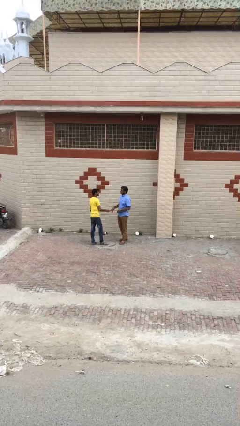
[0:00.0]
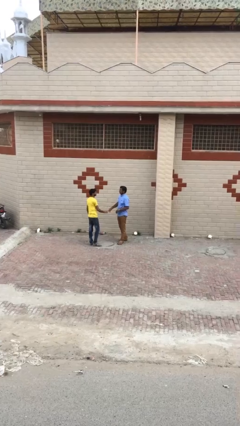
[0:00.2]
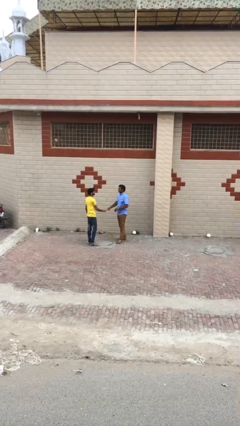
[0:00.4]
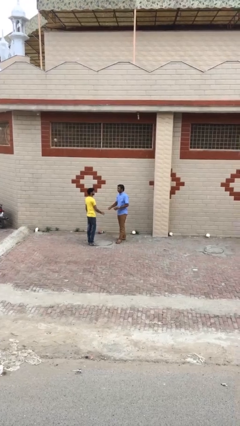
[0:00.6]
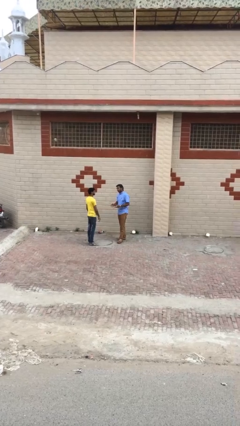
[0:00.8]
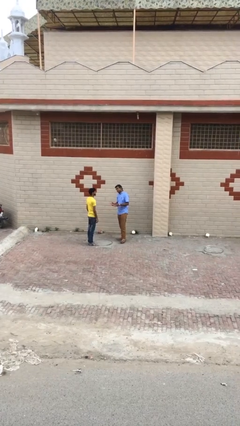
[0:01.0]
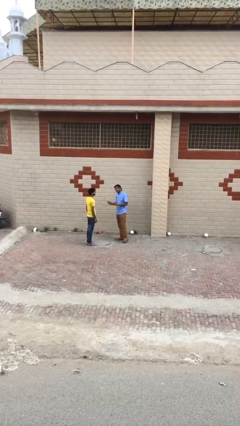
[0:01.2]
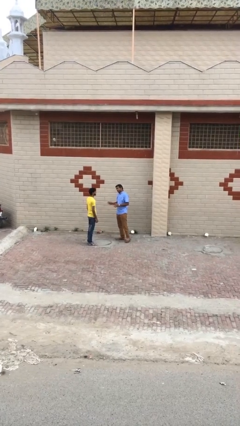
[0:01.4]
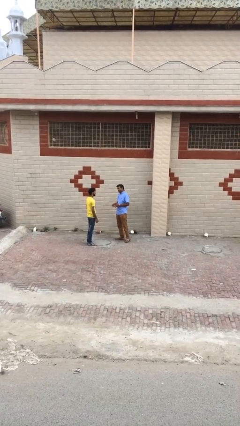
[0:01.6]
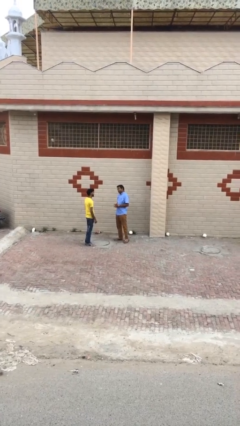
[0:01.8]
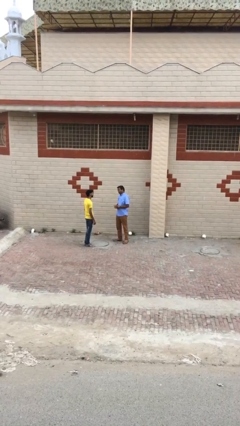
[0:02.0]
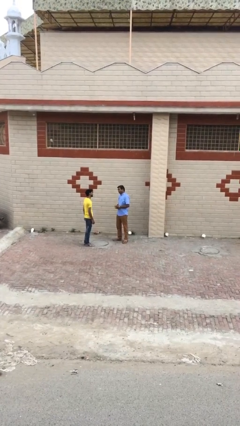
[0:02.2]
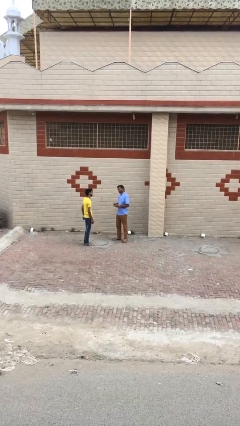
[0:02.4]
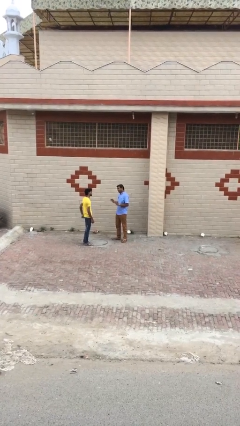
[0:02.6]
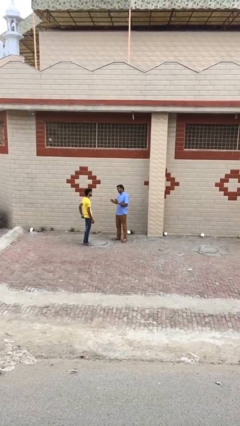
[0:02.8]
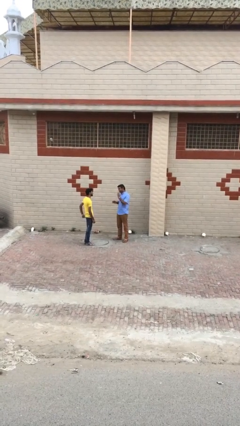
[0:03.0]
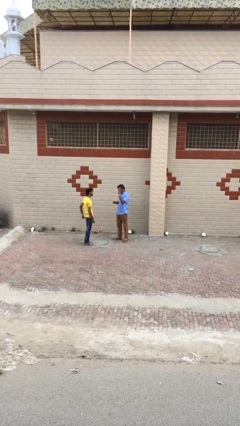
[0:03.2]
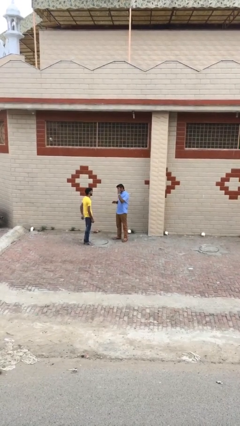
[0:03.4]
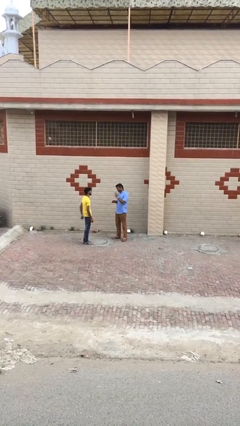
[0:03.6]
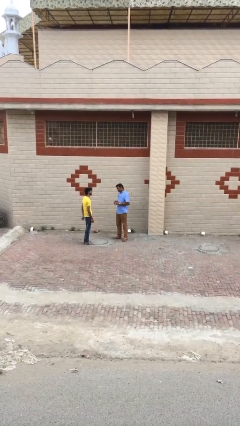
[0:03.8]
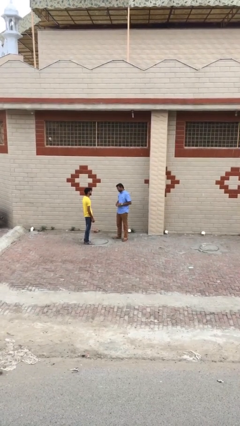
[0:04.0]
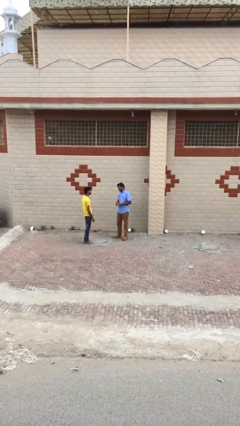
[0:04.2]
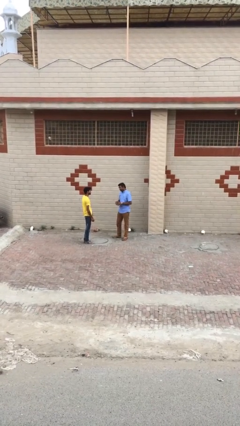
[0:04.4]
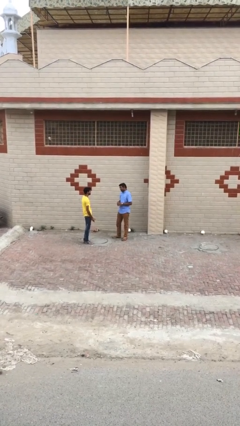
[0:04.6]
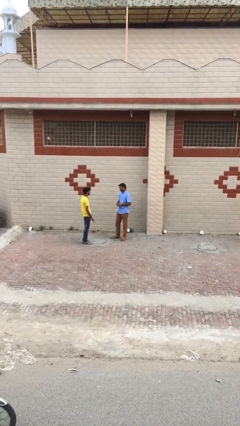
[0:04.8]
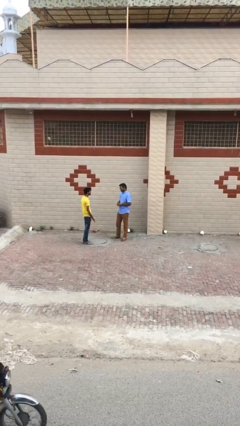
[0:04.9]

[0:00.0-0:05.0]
person talks to person

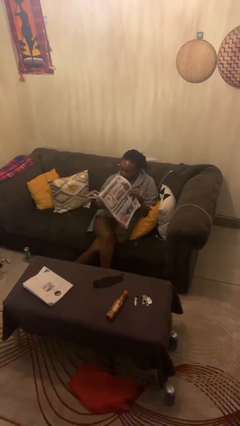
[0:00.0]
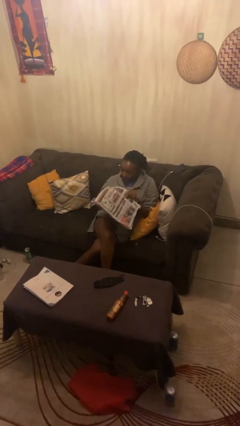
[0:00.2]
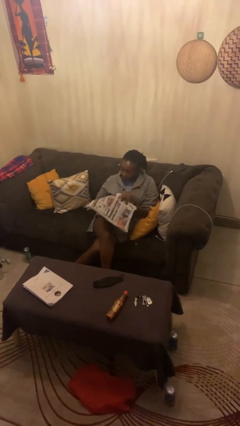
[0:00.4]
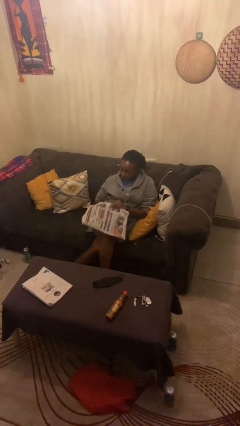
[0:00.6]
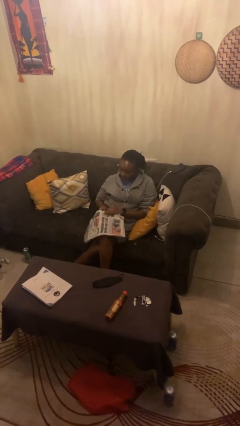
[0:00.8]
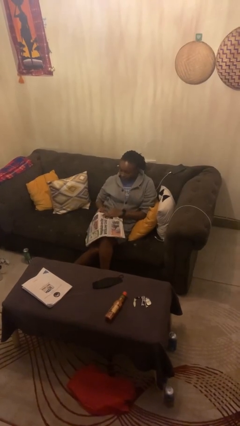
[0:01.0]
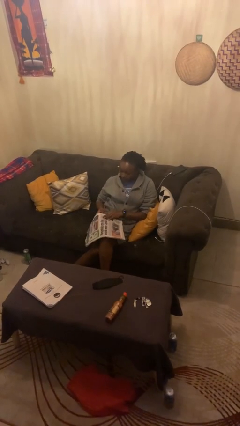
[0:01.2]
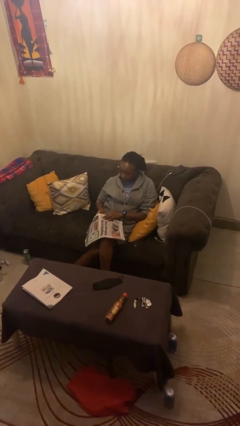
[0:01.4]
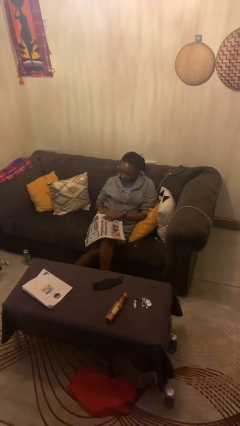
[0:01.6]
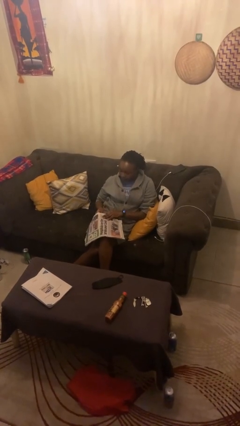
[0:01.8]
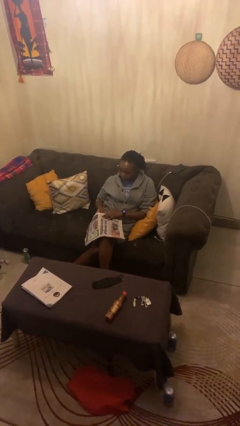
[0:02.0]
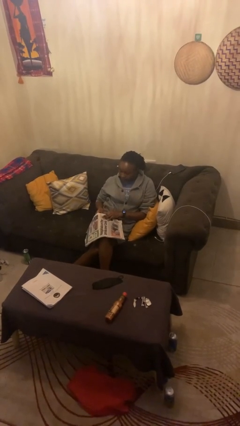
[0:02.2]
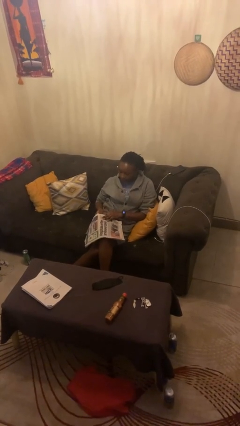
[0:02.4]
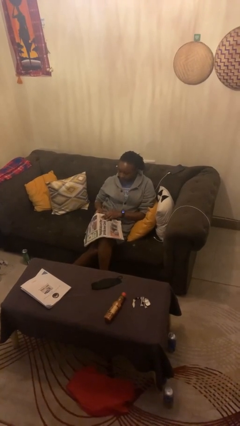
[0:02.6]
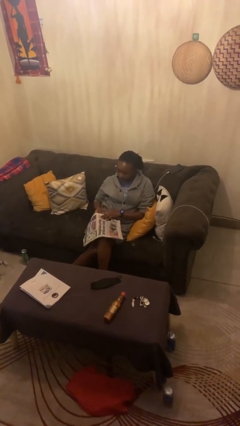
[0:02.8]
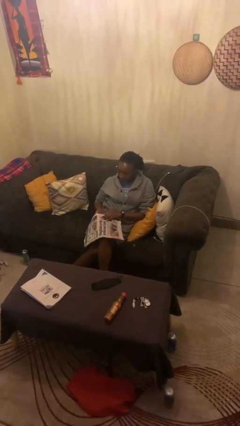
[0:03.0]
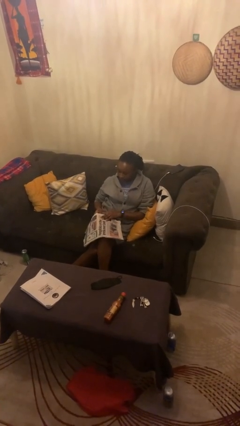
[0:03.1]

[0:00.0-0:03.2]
person reads newspaper

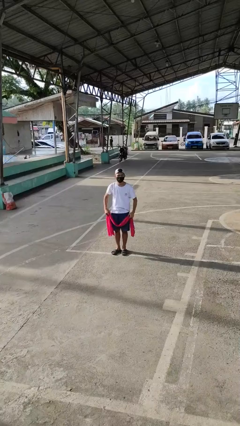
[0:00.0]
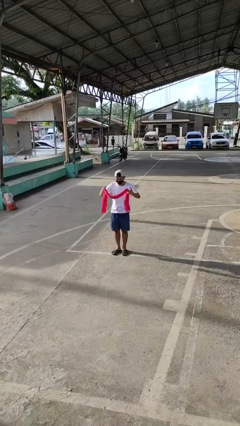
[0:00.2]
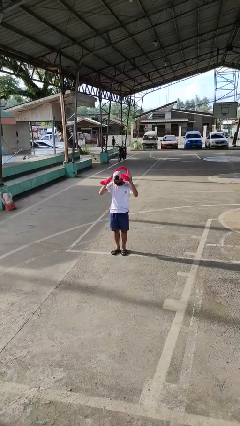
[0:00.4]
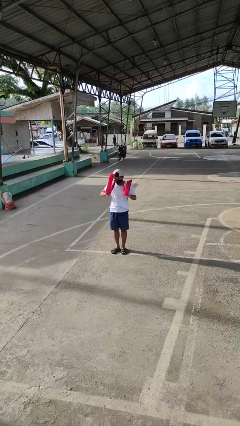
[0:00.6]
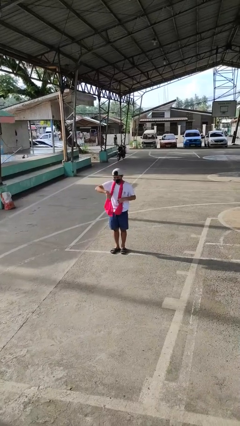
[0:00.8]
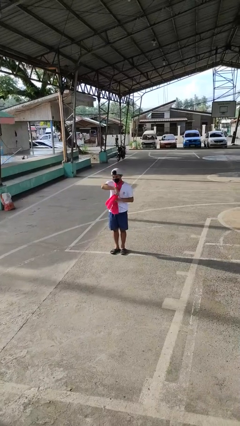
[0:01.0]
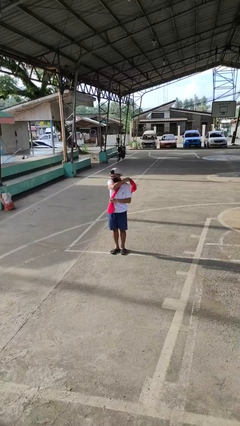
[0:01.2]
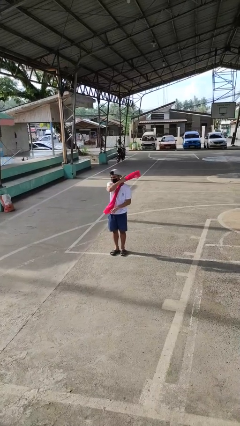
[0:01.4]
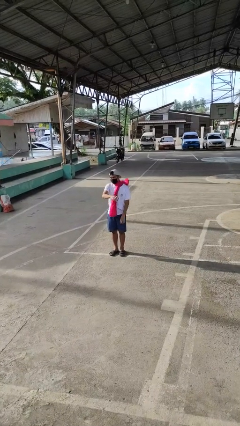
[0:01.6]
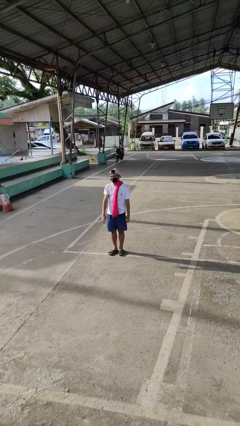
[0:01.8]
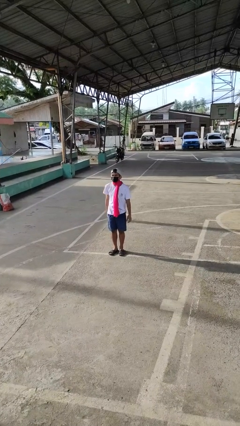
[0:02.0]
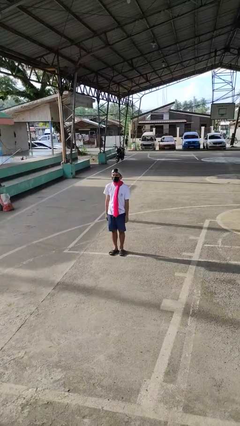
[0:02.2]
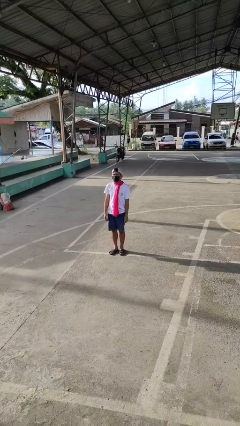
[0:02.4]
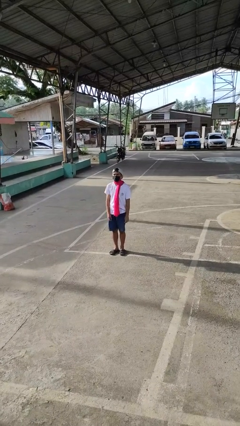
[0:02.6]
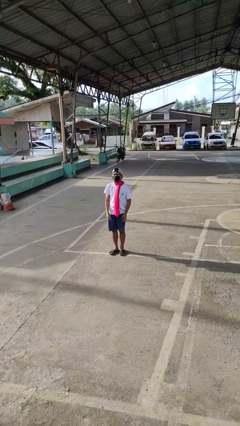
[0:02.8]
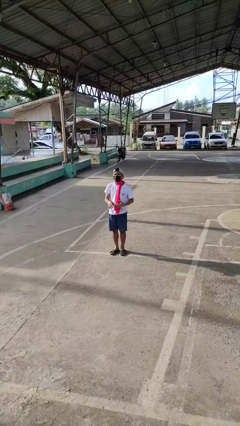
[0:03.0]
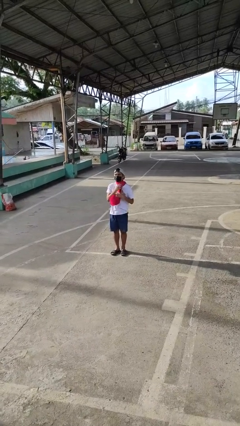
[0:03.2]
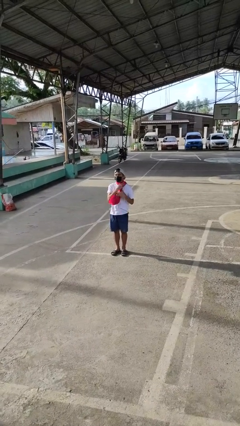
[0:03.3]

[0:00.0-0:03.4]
person puts on scarf

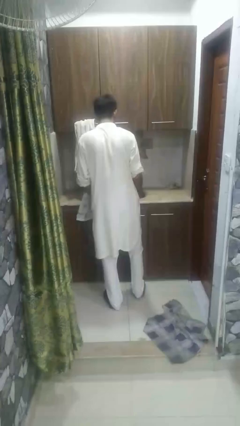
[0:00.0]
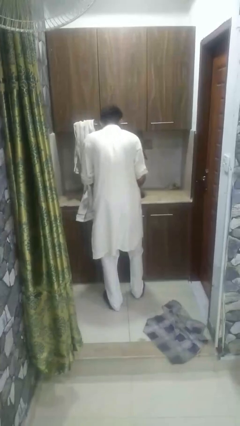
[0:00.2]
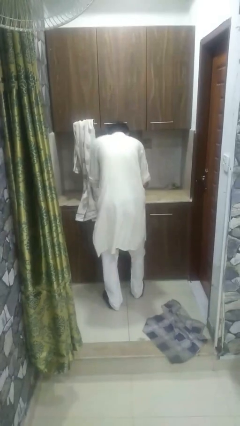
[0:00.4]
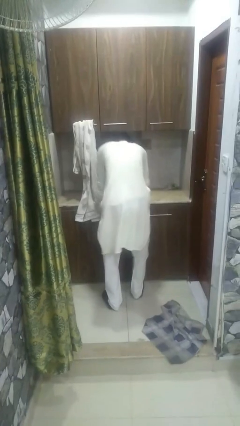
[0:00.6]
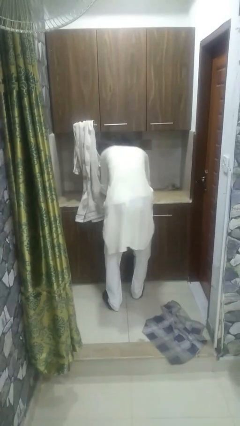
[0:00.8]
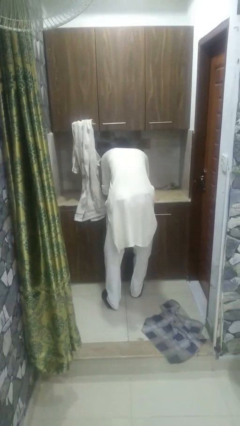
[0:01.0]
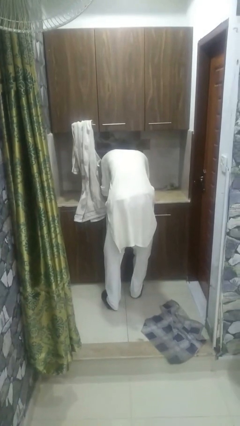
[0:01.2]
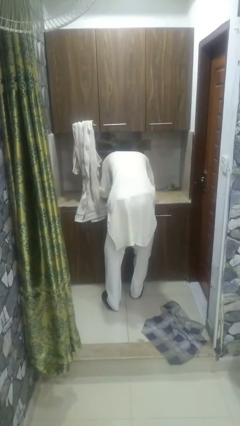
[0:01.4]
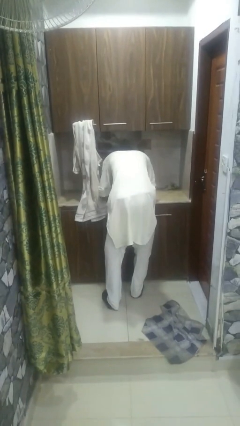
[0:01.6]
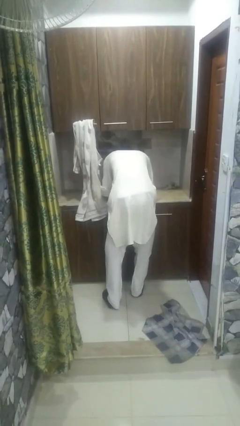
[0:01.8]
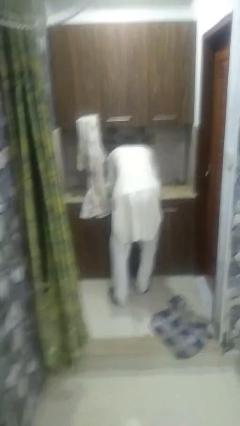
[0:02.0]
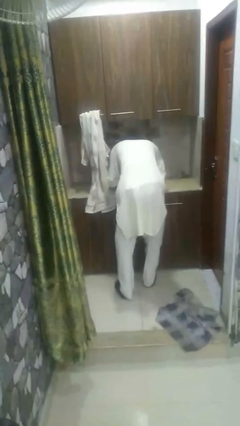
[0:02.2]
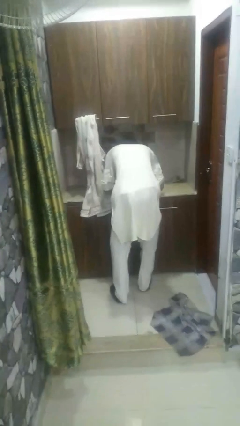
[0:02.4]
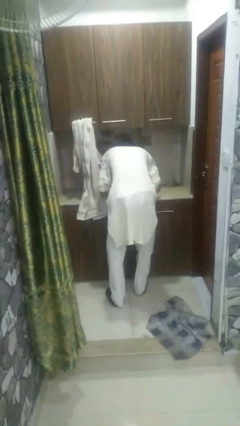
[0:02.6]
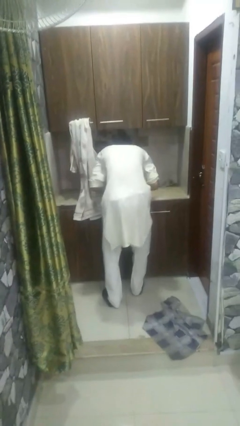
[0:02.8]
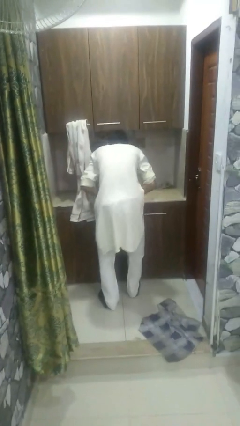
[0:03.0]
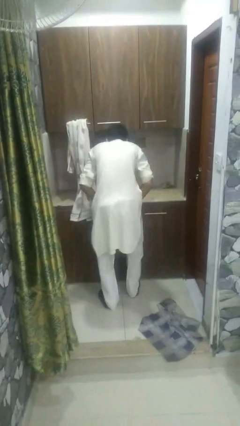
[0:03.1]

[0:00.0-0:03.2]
person washes face

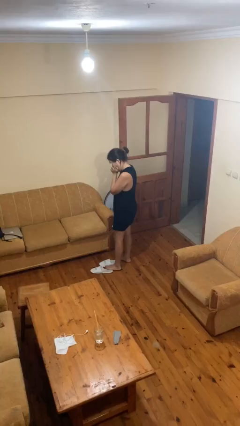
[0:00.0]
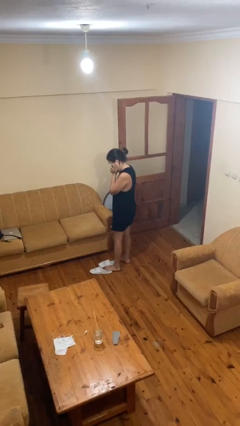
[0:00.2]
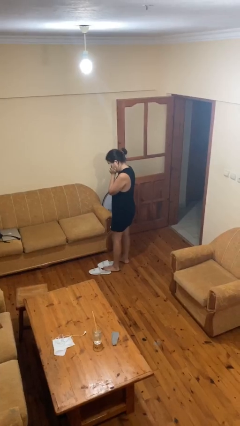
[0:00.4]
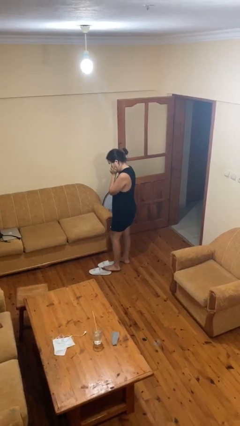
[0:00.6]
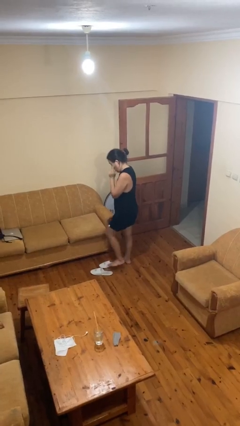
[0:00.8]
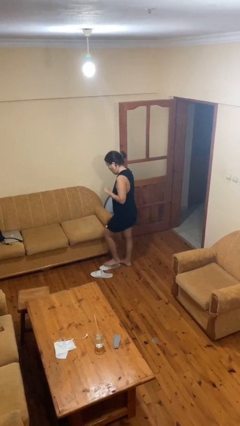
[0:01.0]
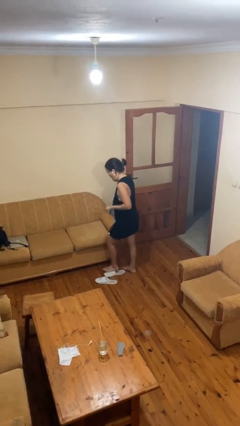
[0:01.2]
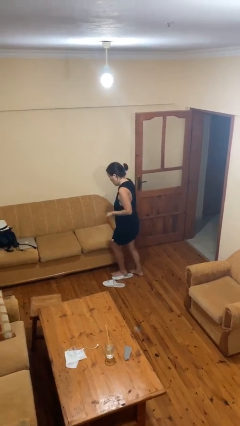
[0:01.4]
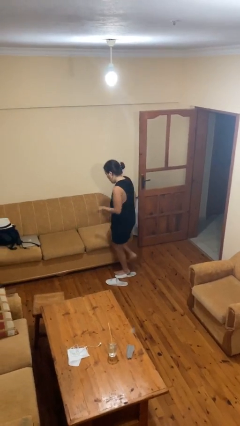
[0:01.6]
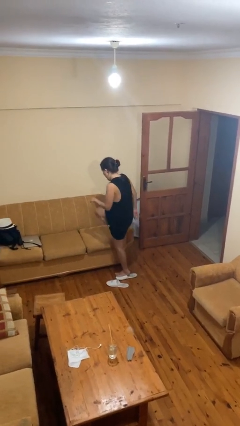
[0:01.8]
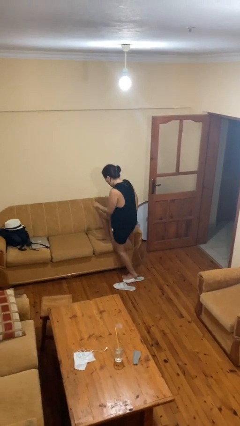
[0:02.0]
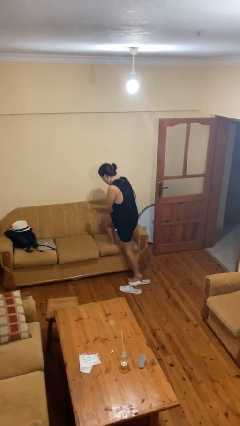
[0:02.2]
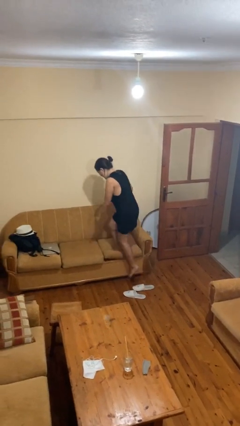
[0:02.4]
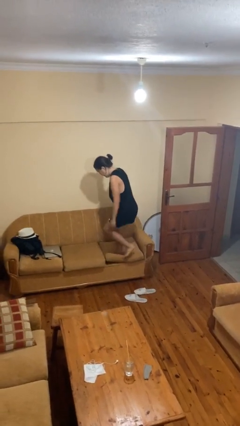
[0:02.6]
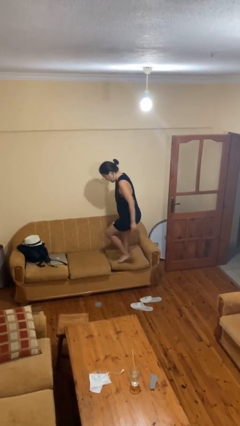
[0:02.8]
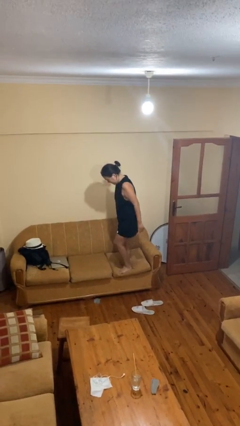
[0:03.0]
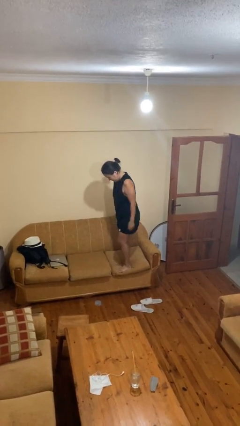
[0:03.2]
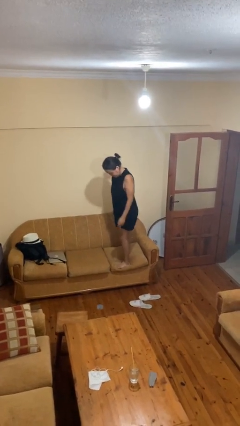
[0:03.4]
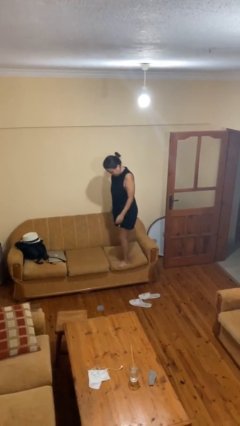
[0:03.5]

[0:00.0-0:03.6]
person climbs on couch
